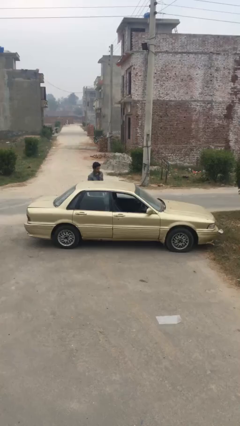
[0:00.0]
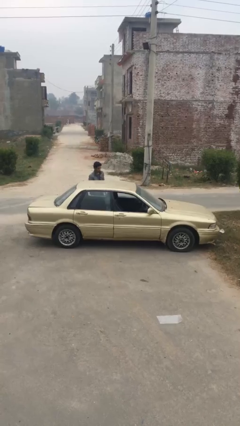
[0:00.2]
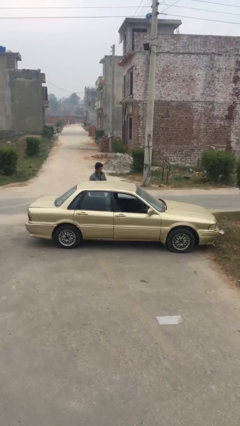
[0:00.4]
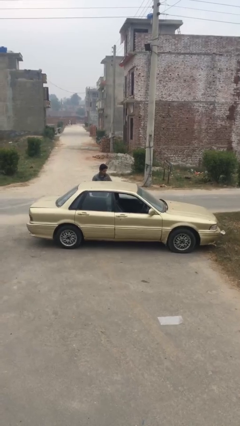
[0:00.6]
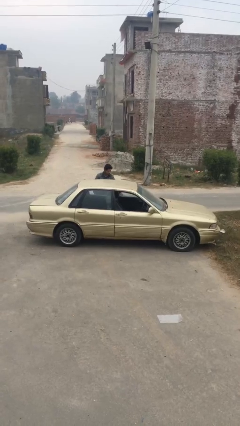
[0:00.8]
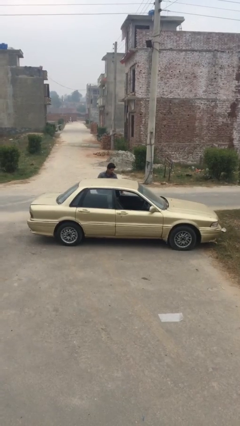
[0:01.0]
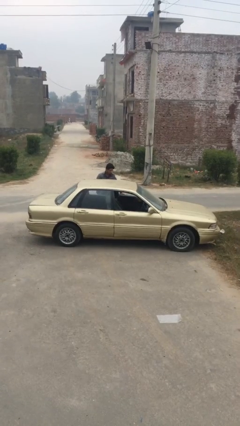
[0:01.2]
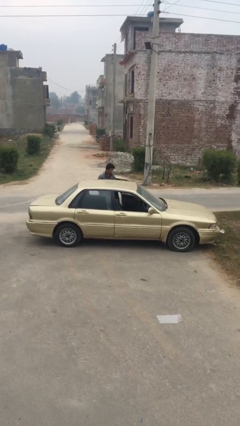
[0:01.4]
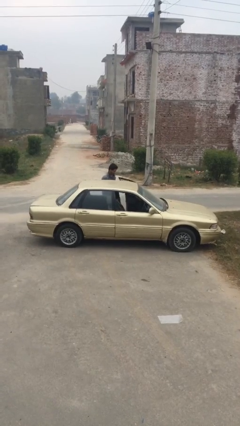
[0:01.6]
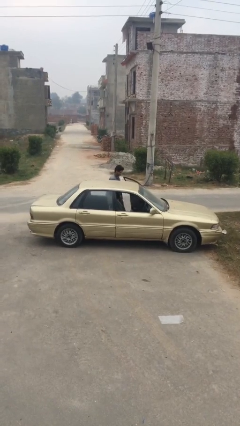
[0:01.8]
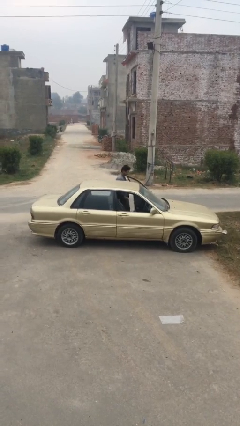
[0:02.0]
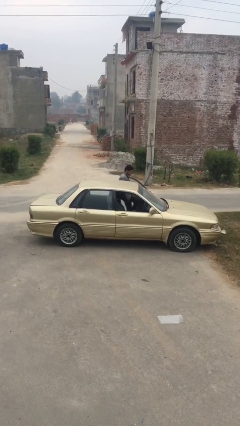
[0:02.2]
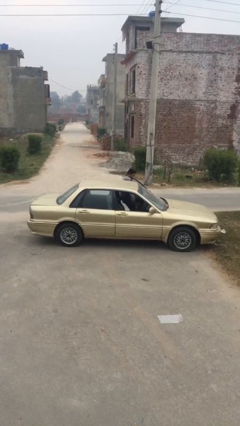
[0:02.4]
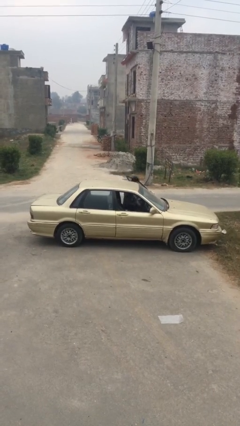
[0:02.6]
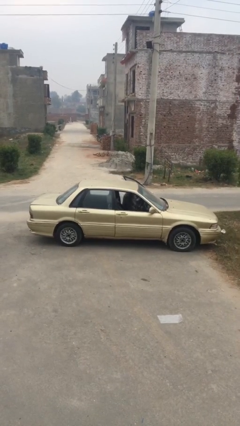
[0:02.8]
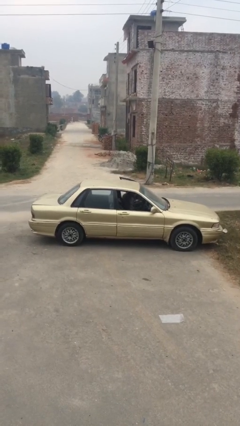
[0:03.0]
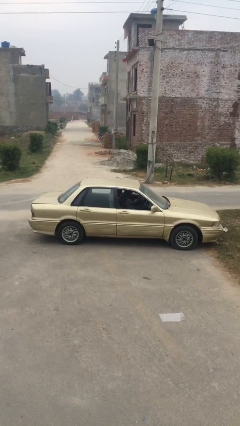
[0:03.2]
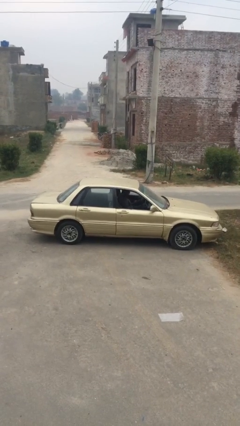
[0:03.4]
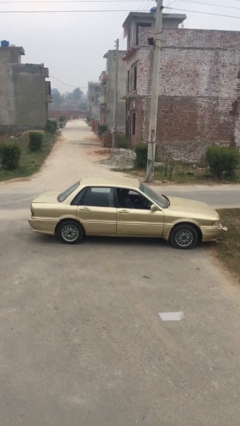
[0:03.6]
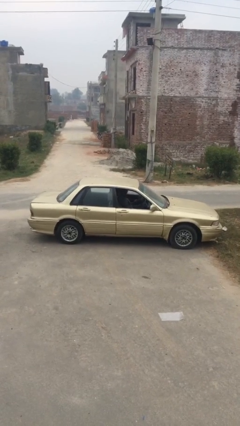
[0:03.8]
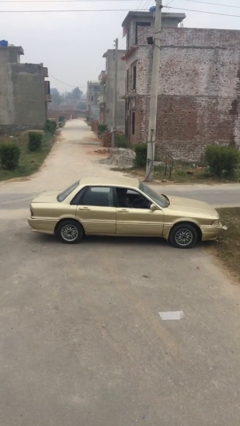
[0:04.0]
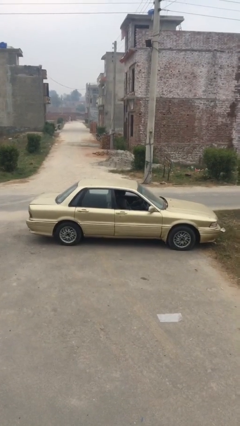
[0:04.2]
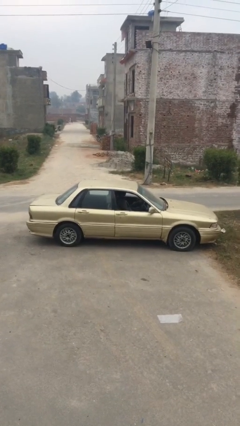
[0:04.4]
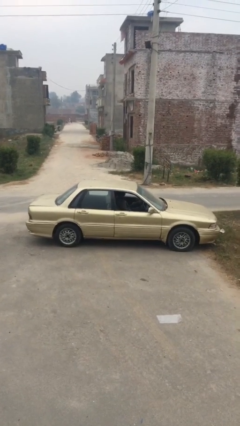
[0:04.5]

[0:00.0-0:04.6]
car picks up person

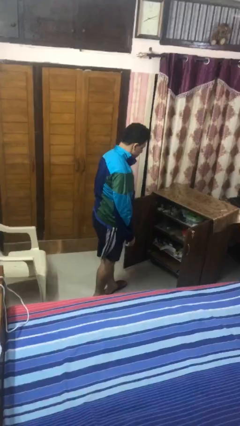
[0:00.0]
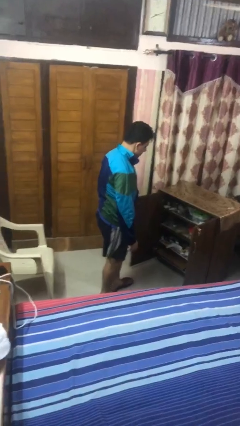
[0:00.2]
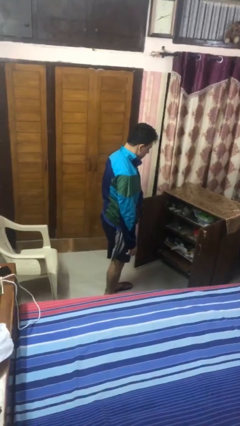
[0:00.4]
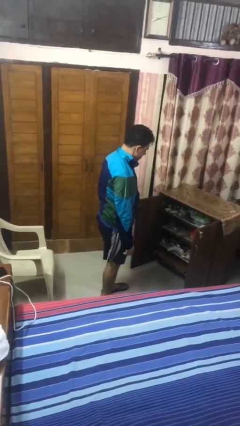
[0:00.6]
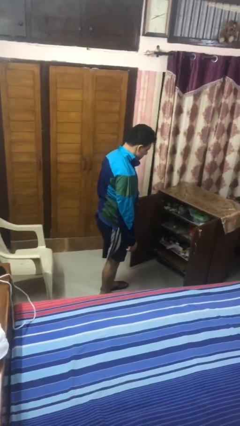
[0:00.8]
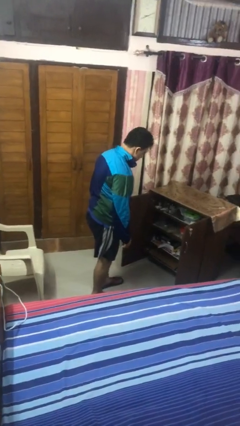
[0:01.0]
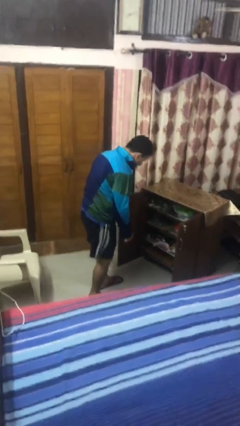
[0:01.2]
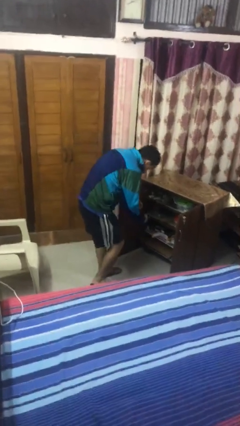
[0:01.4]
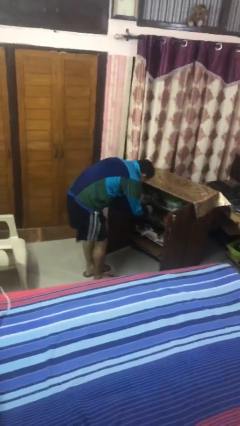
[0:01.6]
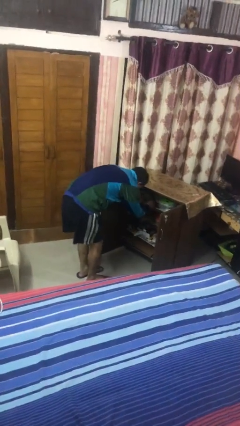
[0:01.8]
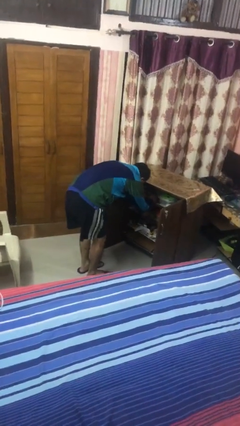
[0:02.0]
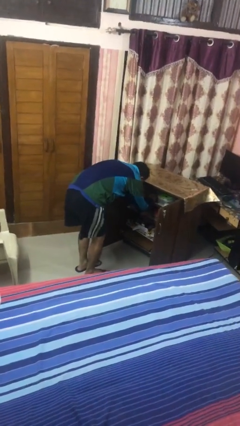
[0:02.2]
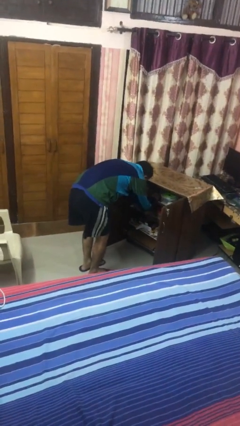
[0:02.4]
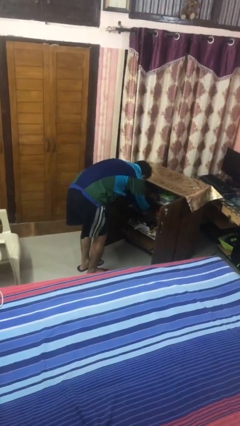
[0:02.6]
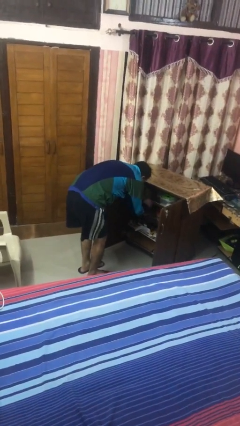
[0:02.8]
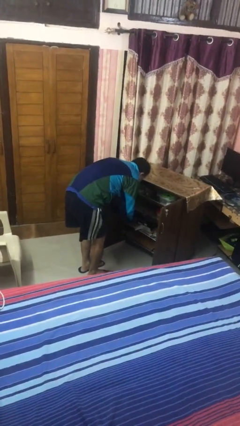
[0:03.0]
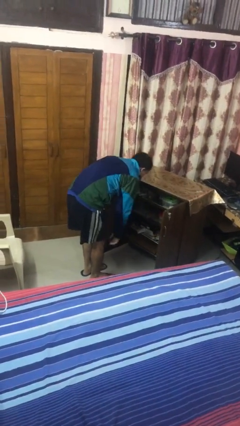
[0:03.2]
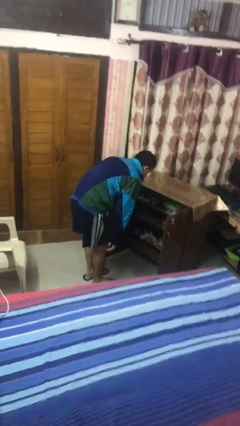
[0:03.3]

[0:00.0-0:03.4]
person searches in cabinet

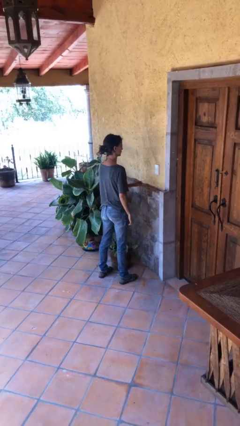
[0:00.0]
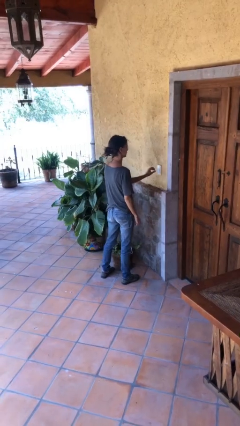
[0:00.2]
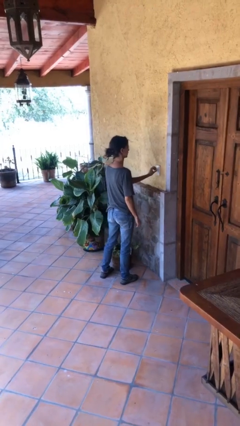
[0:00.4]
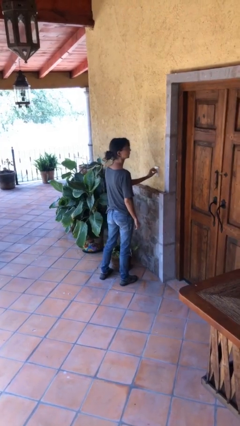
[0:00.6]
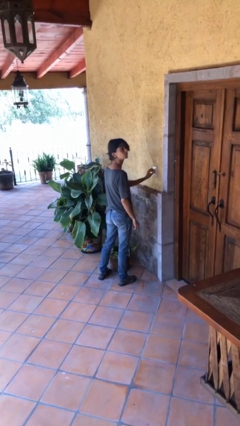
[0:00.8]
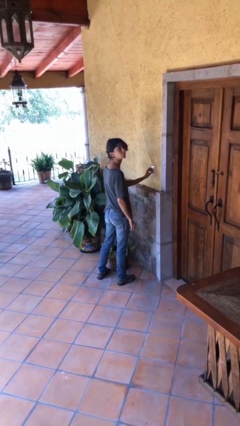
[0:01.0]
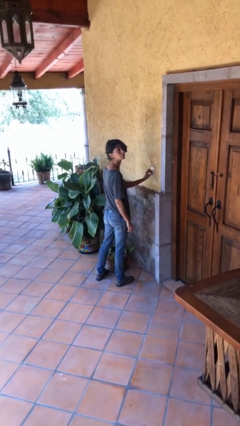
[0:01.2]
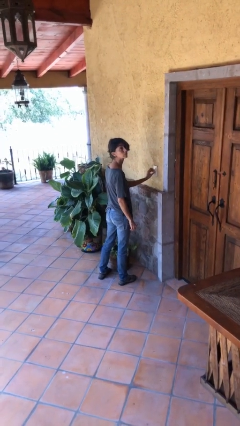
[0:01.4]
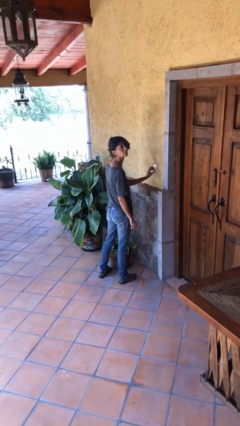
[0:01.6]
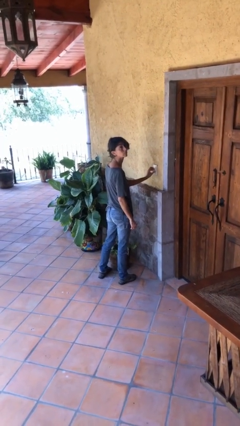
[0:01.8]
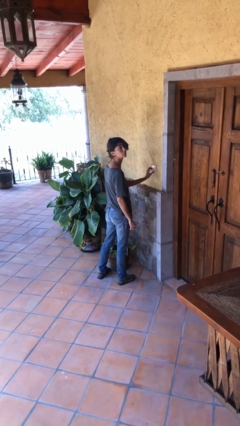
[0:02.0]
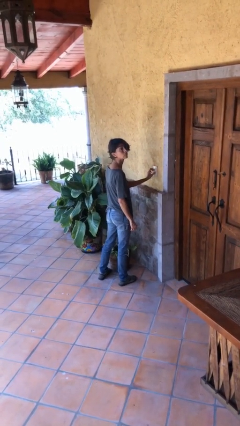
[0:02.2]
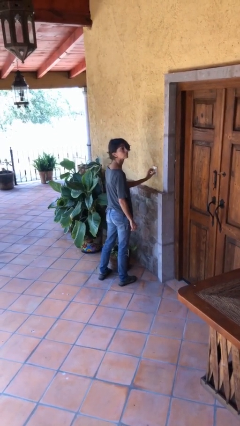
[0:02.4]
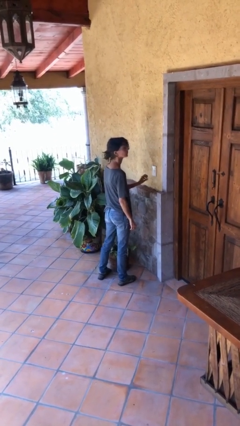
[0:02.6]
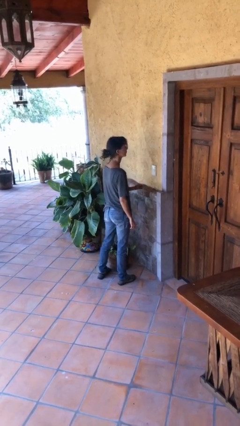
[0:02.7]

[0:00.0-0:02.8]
person adjusts thermostat

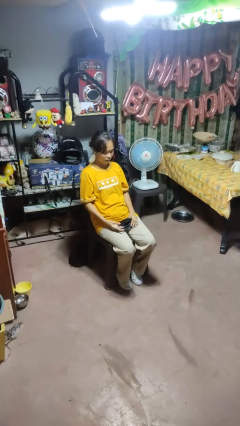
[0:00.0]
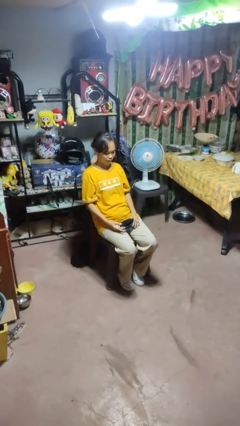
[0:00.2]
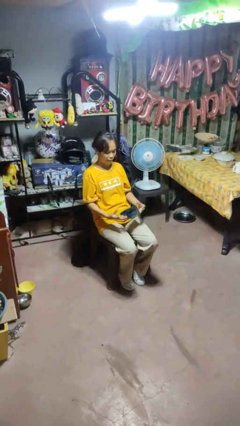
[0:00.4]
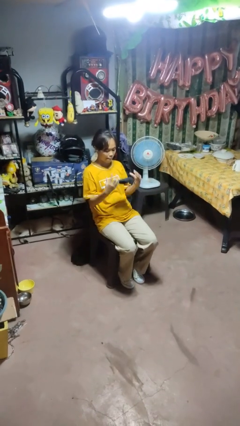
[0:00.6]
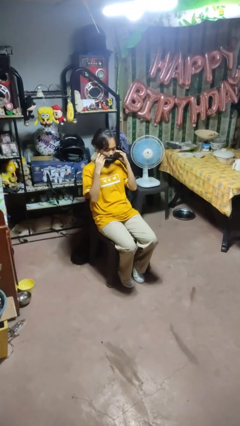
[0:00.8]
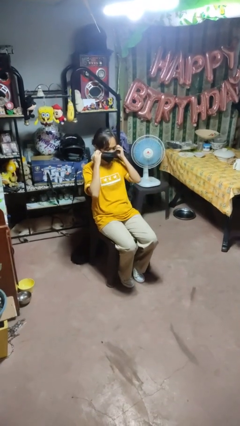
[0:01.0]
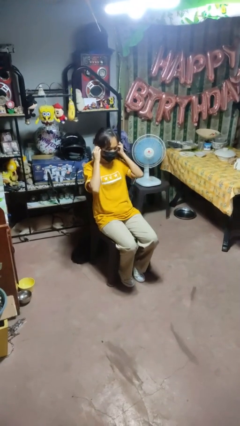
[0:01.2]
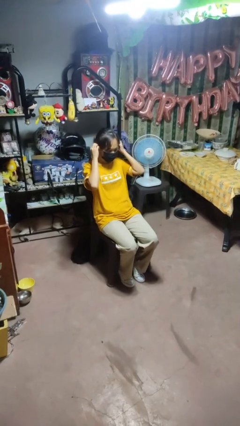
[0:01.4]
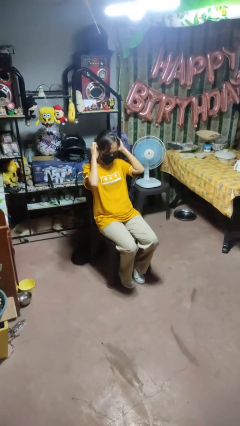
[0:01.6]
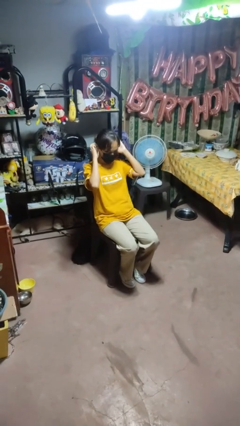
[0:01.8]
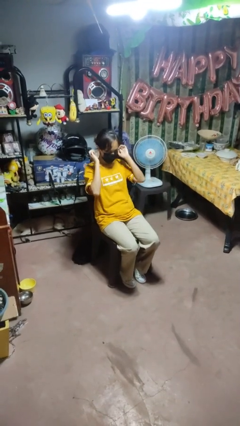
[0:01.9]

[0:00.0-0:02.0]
person puts on facemask

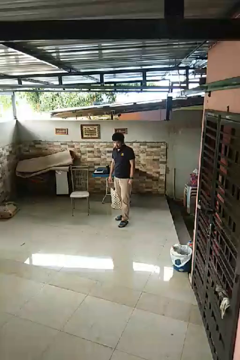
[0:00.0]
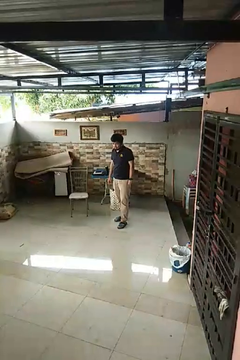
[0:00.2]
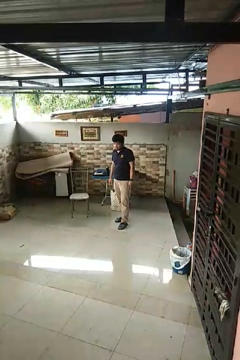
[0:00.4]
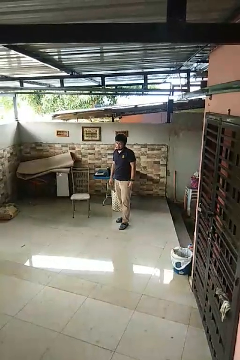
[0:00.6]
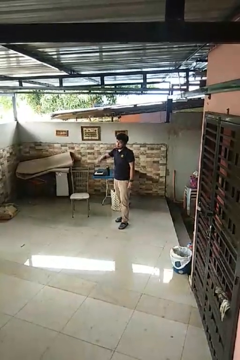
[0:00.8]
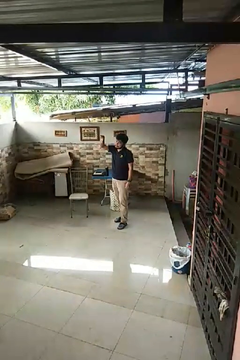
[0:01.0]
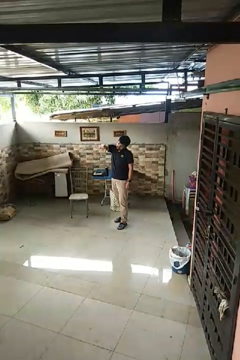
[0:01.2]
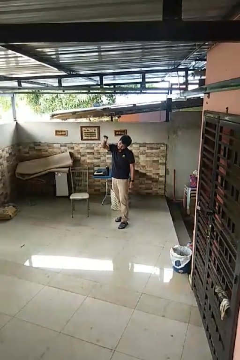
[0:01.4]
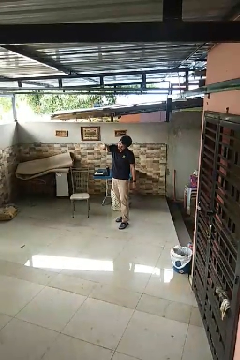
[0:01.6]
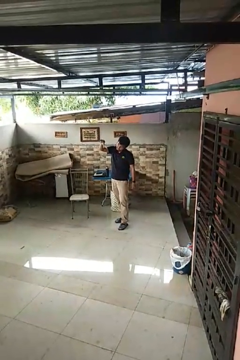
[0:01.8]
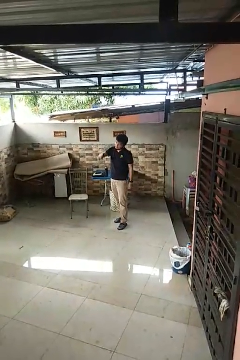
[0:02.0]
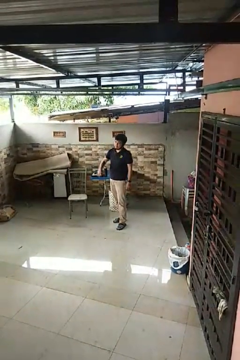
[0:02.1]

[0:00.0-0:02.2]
person gestures thumbs down

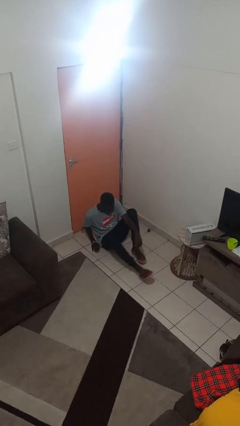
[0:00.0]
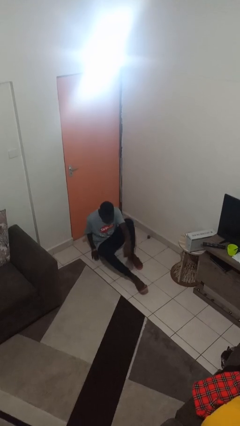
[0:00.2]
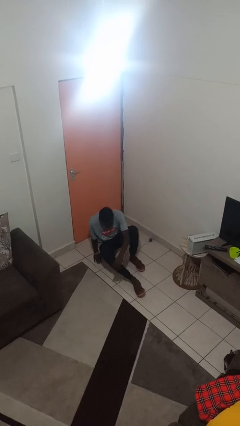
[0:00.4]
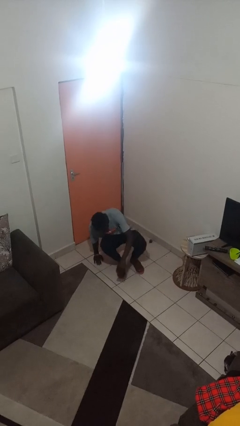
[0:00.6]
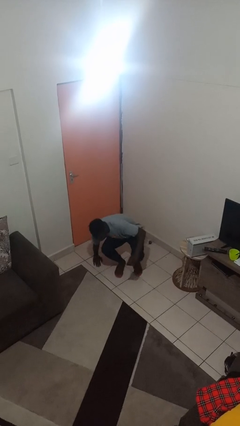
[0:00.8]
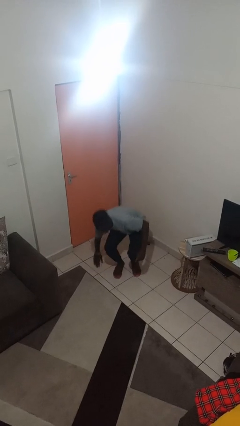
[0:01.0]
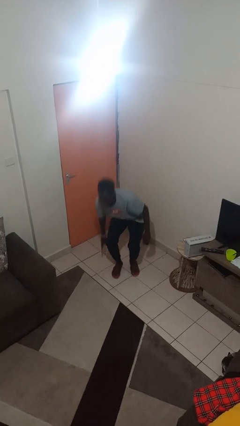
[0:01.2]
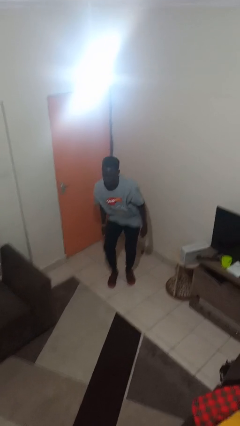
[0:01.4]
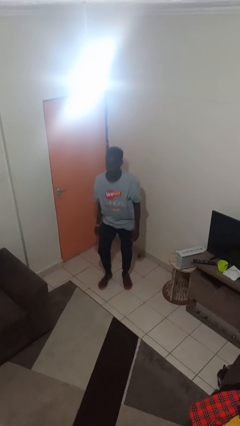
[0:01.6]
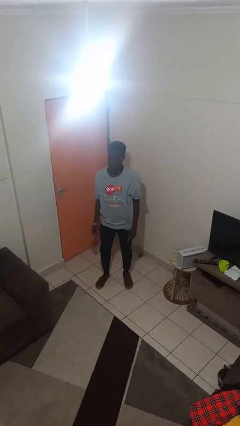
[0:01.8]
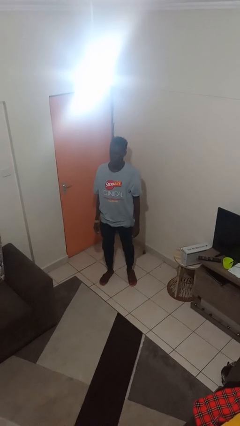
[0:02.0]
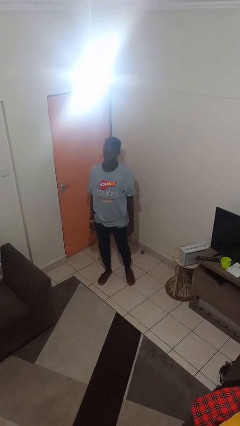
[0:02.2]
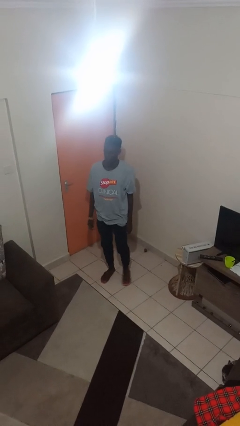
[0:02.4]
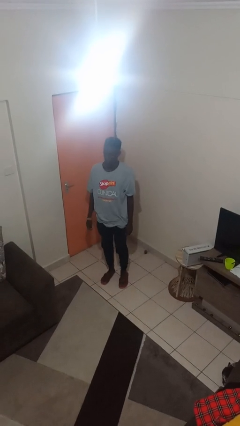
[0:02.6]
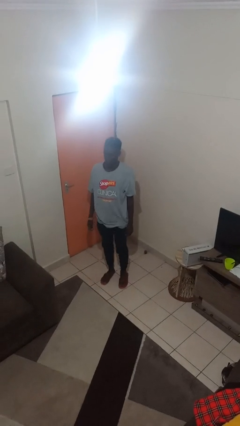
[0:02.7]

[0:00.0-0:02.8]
person stands up from floor

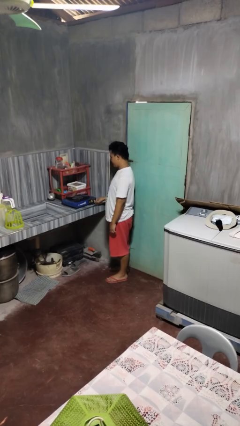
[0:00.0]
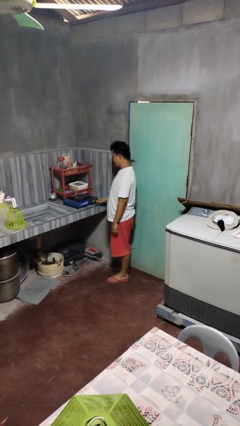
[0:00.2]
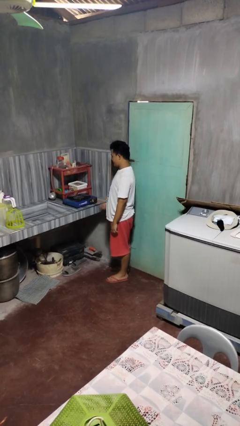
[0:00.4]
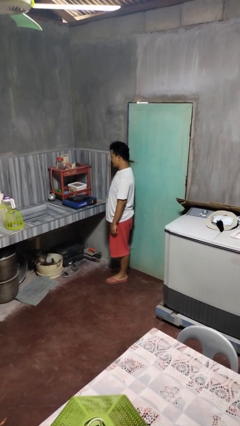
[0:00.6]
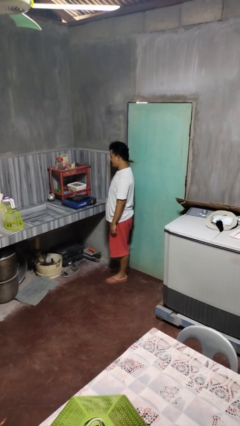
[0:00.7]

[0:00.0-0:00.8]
person turns off stovetop
